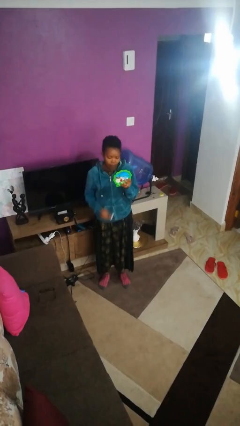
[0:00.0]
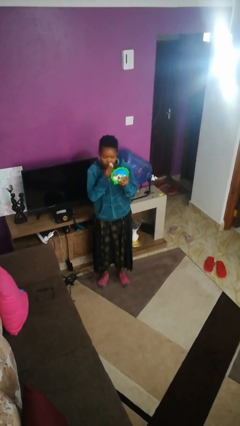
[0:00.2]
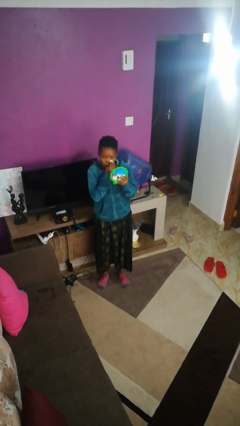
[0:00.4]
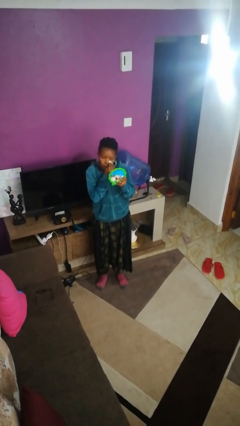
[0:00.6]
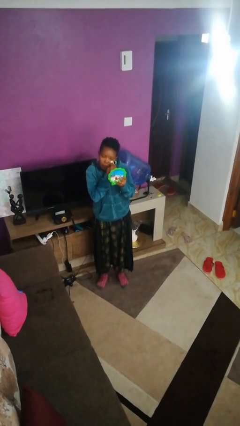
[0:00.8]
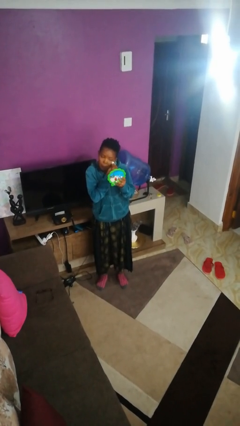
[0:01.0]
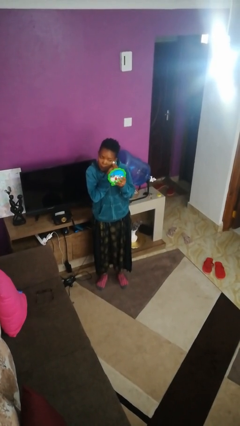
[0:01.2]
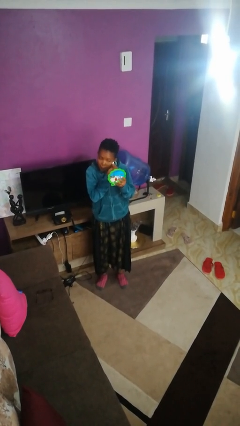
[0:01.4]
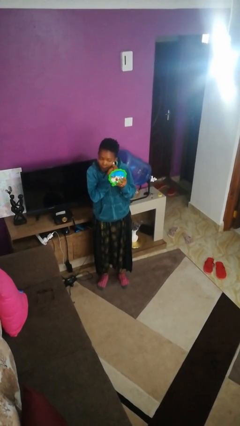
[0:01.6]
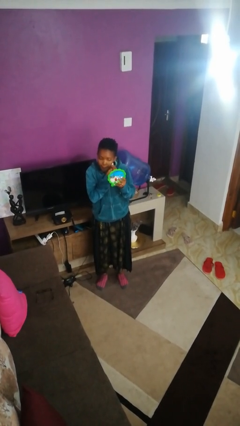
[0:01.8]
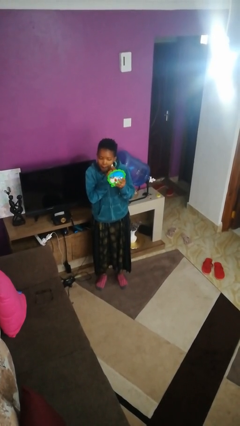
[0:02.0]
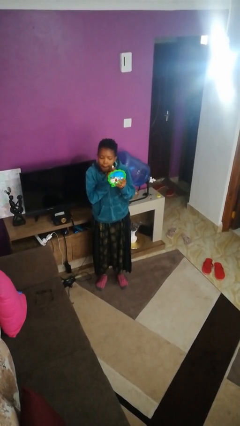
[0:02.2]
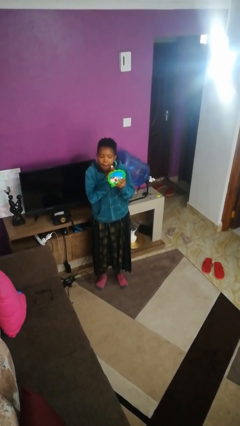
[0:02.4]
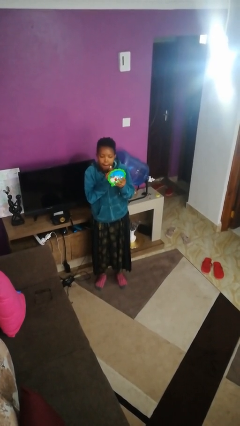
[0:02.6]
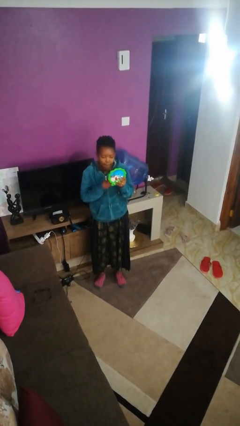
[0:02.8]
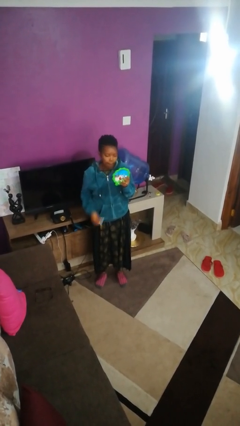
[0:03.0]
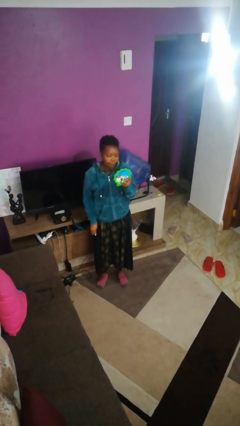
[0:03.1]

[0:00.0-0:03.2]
person applies foundation makeup

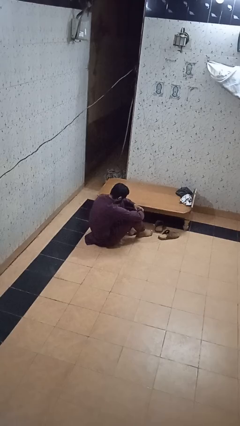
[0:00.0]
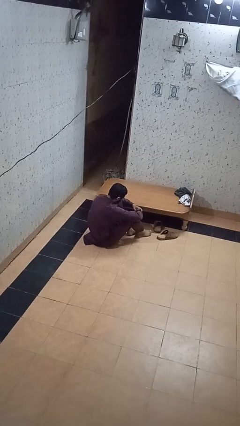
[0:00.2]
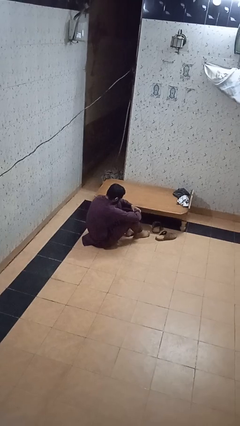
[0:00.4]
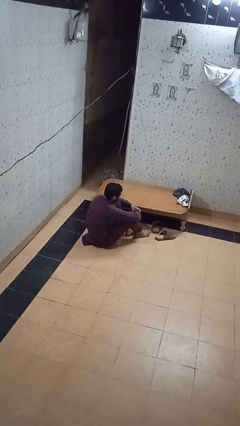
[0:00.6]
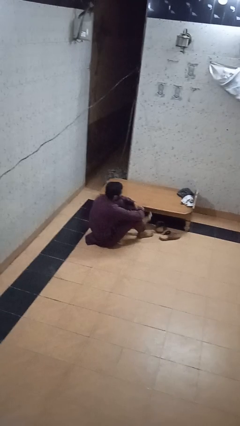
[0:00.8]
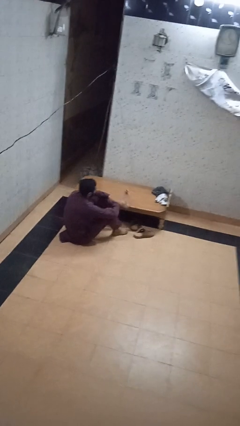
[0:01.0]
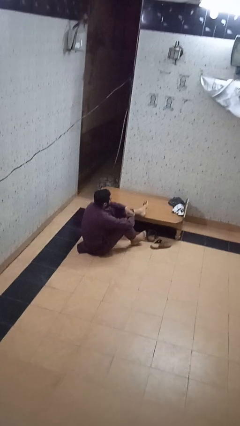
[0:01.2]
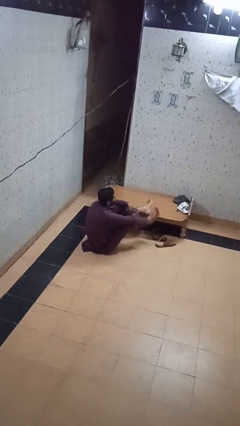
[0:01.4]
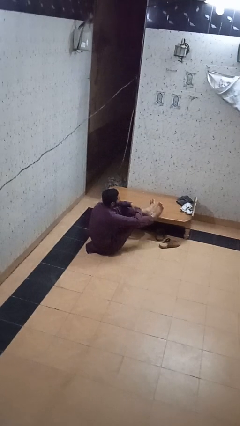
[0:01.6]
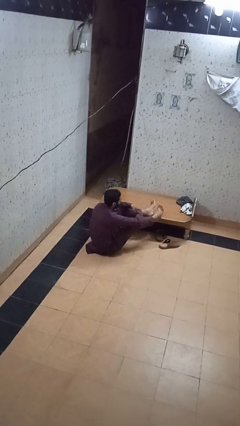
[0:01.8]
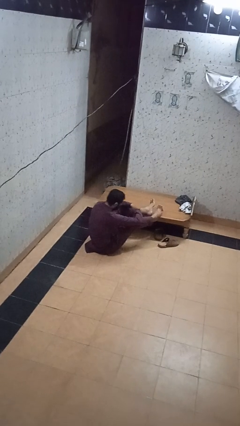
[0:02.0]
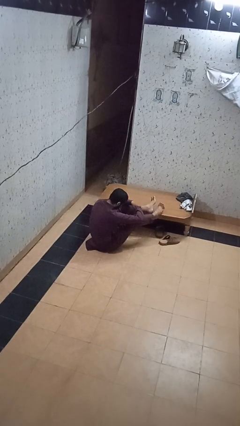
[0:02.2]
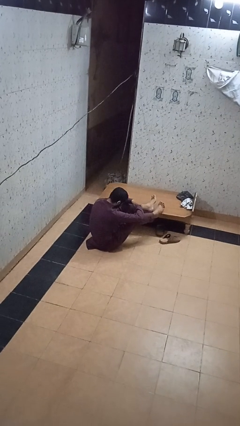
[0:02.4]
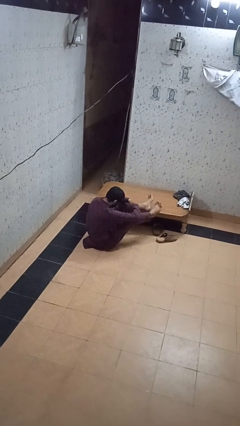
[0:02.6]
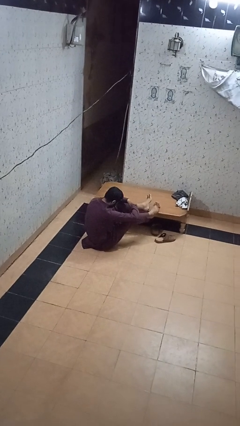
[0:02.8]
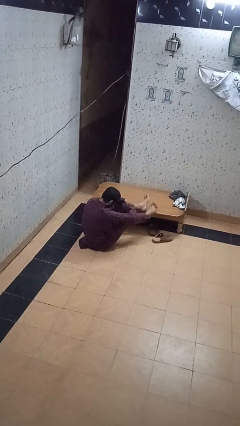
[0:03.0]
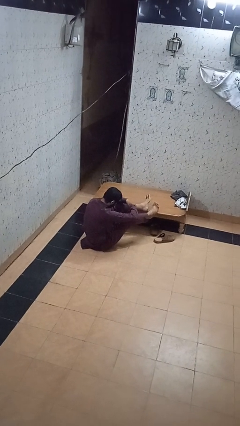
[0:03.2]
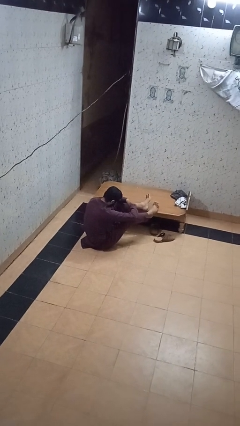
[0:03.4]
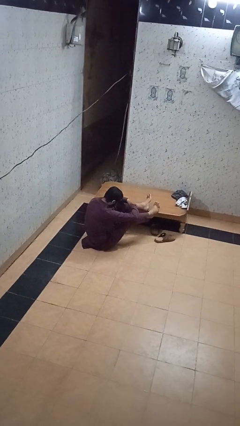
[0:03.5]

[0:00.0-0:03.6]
person puts feet up

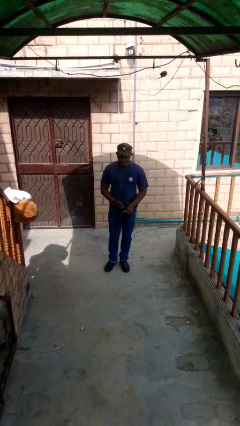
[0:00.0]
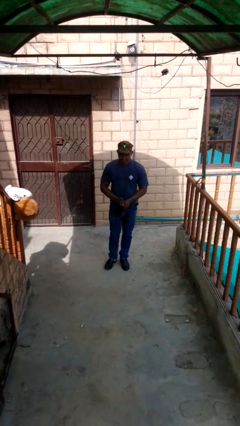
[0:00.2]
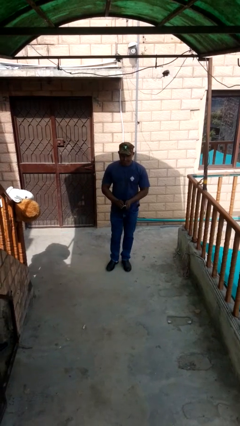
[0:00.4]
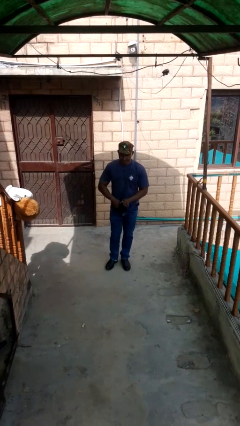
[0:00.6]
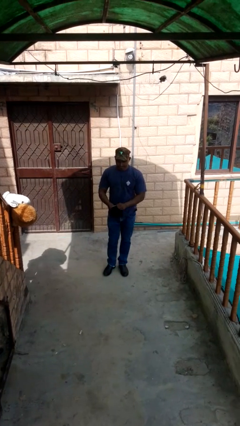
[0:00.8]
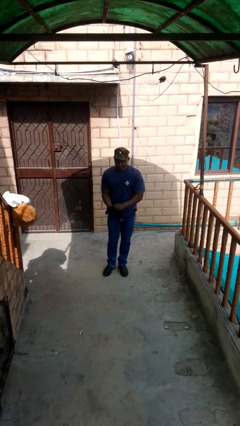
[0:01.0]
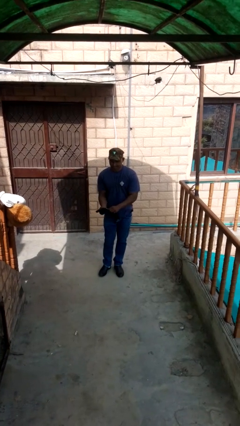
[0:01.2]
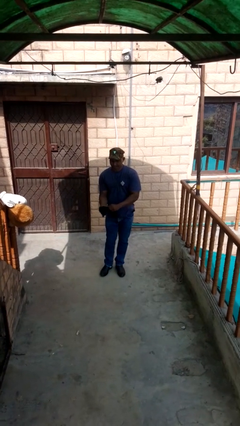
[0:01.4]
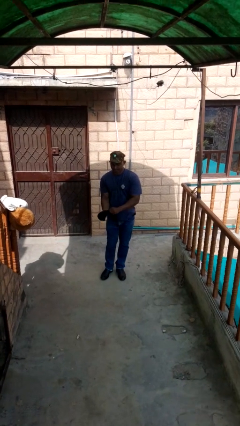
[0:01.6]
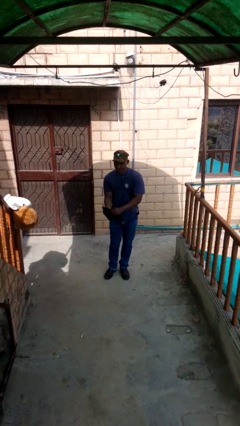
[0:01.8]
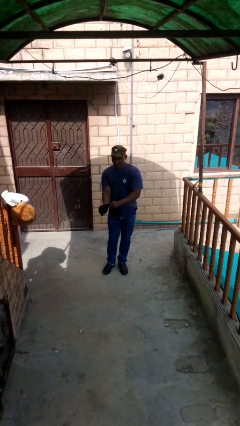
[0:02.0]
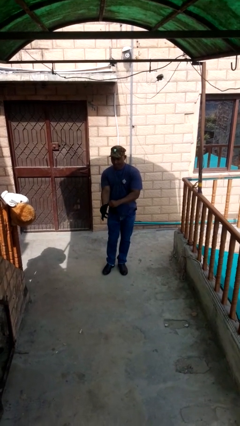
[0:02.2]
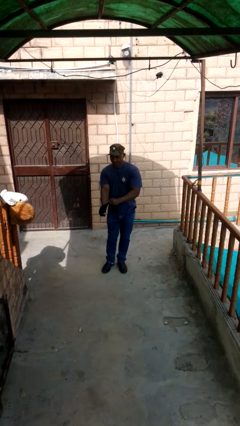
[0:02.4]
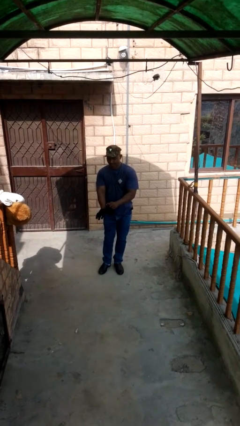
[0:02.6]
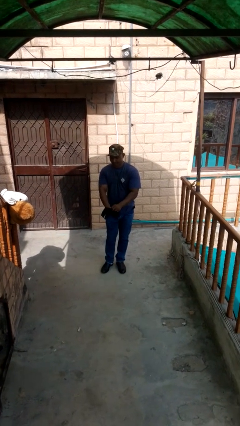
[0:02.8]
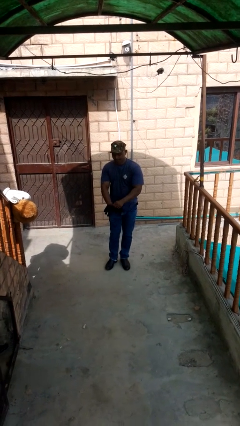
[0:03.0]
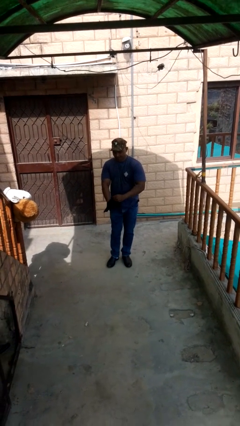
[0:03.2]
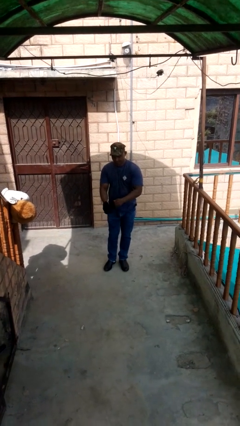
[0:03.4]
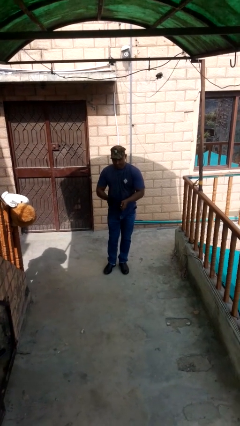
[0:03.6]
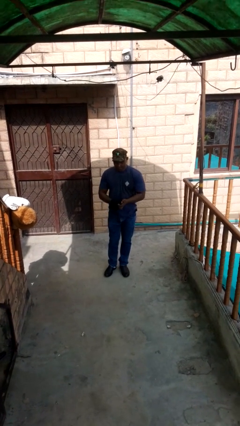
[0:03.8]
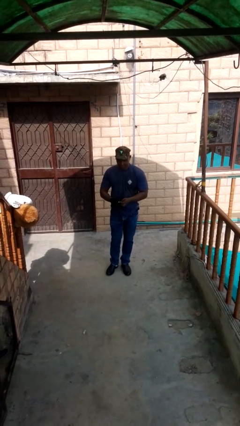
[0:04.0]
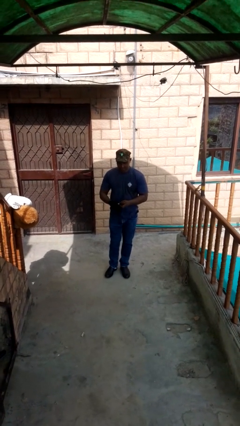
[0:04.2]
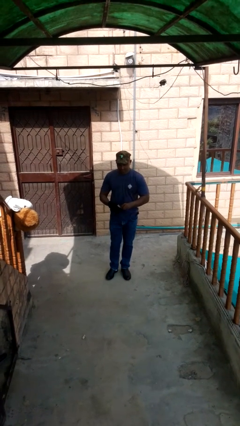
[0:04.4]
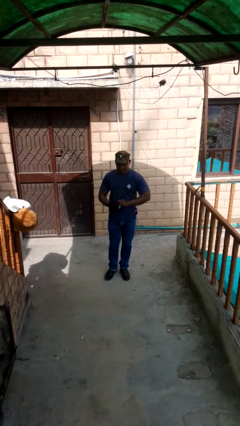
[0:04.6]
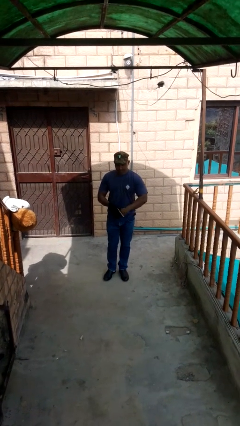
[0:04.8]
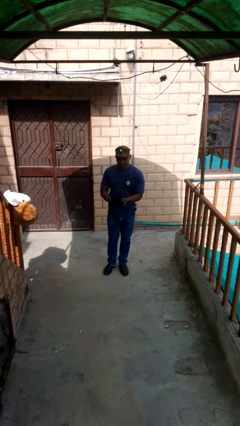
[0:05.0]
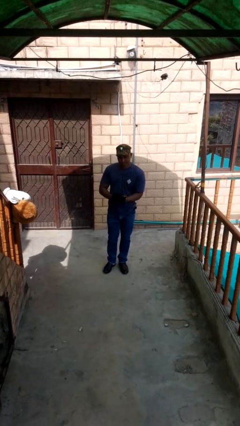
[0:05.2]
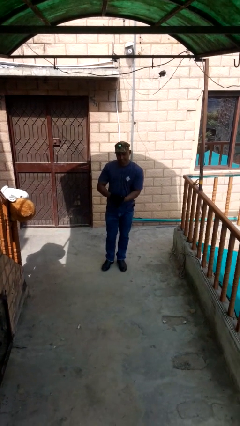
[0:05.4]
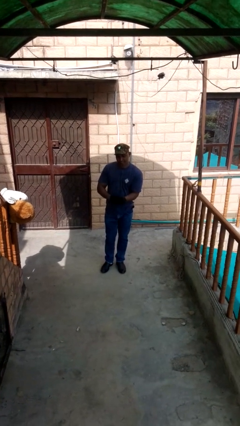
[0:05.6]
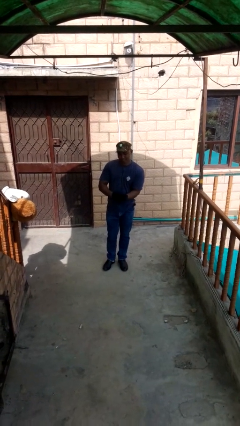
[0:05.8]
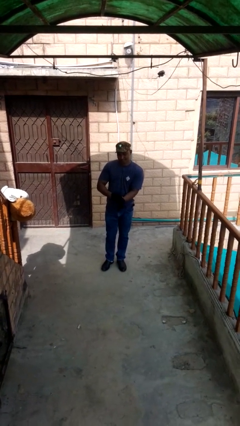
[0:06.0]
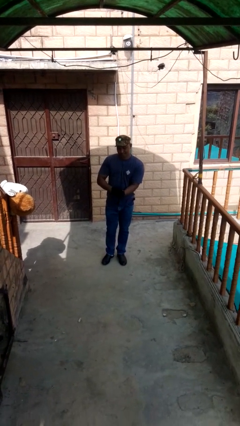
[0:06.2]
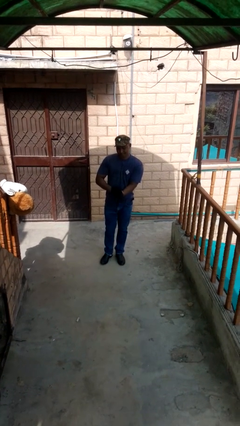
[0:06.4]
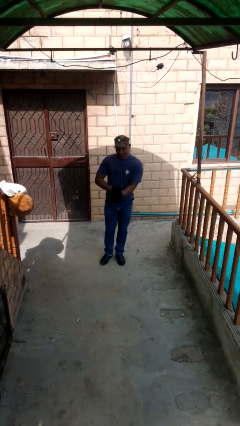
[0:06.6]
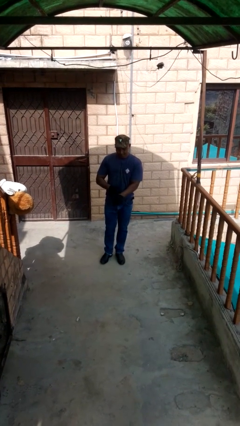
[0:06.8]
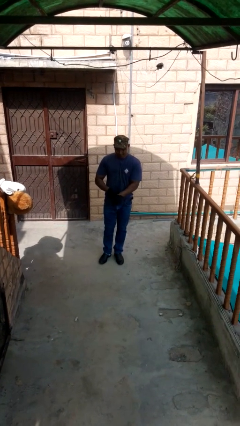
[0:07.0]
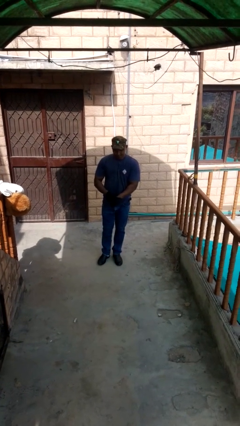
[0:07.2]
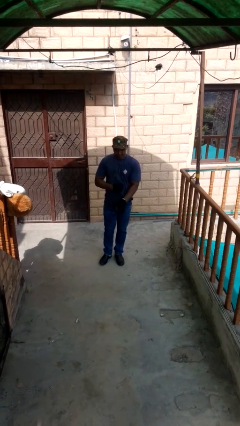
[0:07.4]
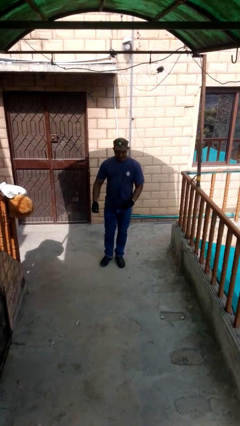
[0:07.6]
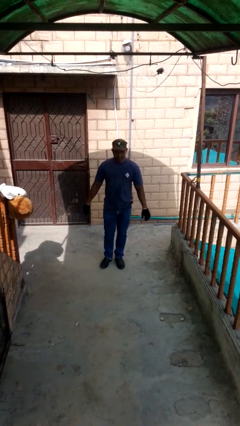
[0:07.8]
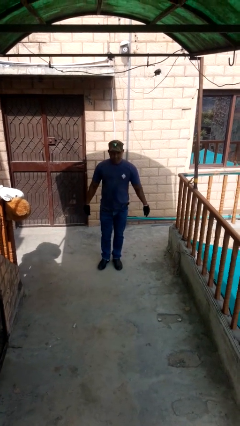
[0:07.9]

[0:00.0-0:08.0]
person puts on gloves

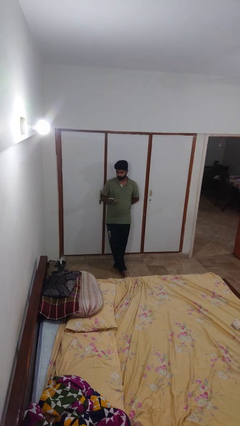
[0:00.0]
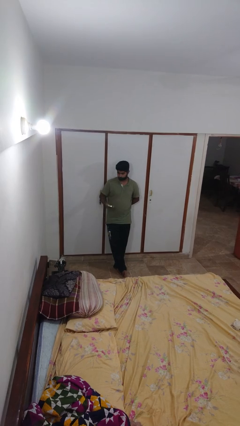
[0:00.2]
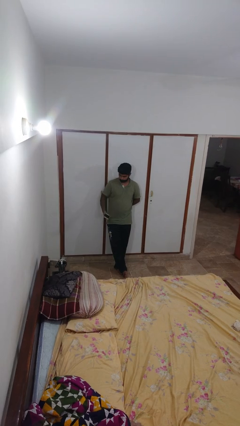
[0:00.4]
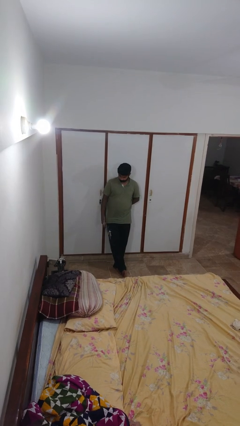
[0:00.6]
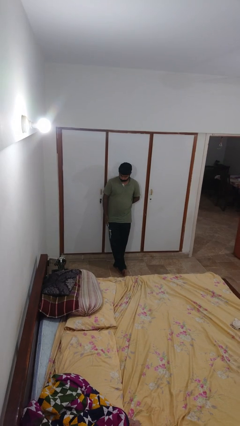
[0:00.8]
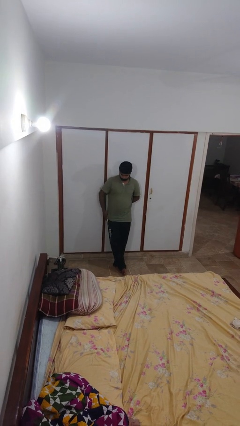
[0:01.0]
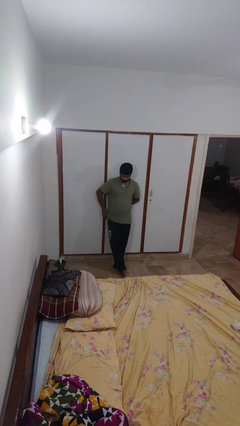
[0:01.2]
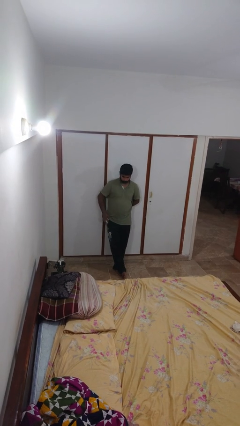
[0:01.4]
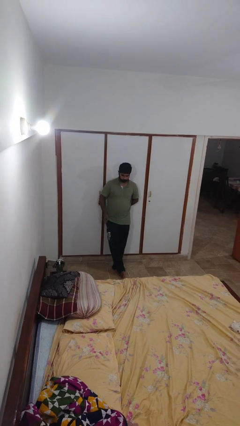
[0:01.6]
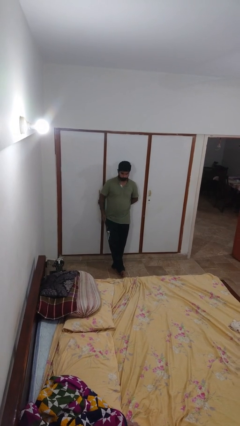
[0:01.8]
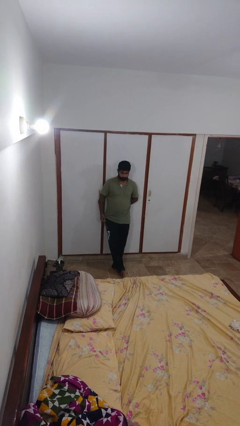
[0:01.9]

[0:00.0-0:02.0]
person puts phone into pocket

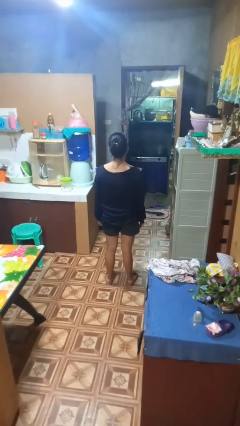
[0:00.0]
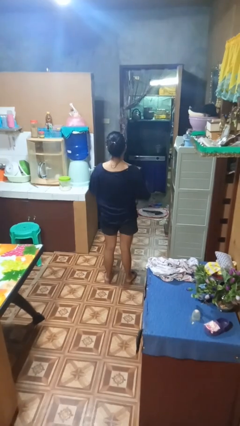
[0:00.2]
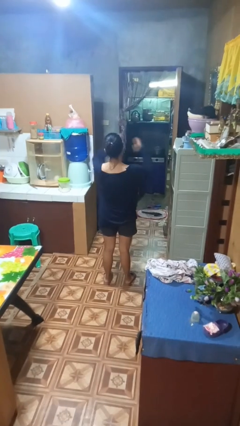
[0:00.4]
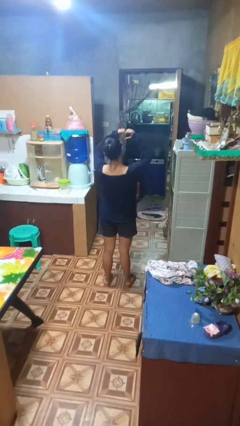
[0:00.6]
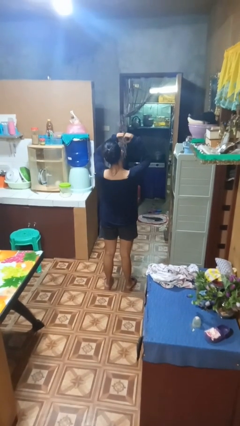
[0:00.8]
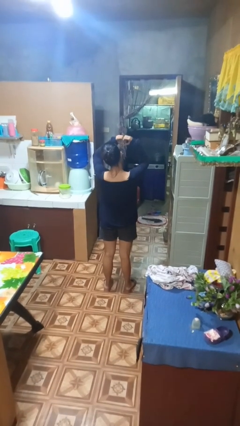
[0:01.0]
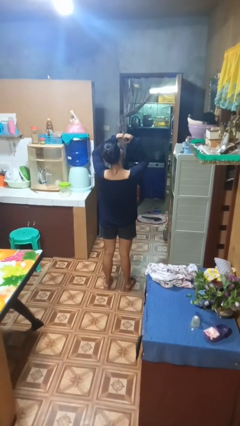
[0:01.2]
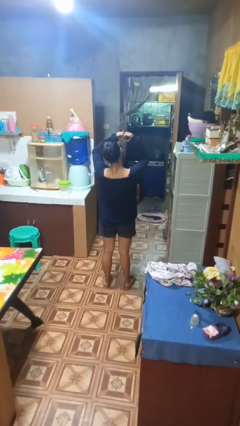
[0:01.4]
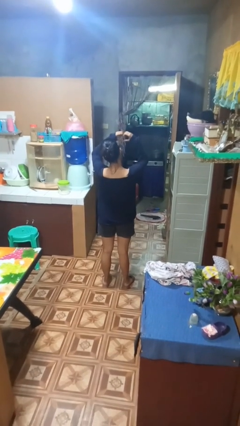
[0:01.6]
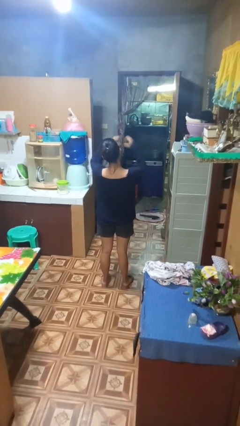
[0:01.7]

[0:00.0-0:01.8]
person gestures heart
